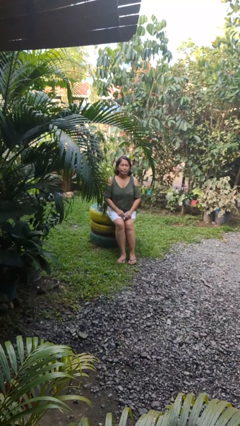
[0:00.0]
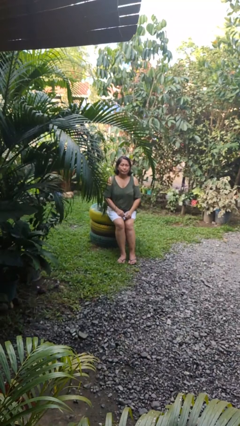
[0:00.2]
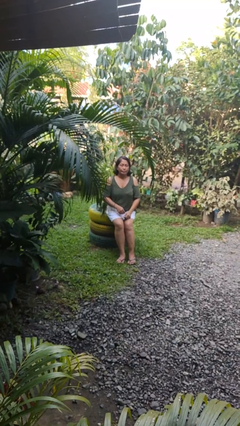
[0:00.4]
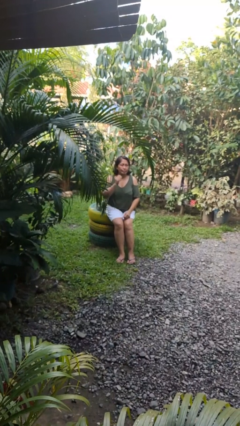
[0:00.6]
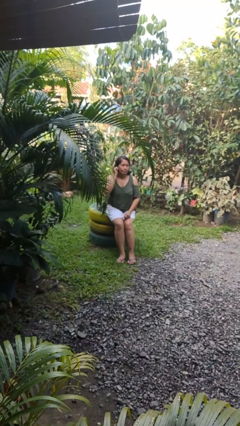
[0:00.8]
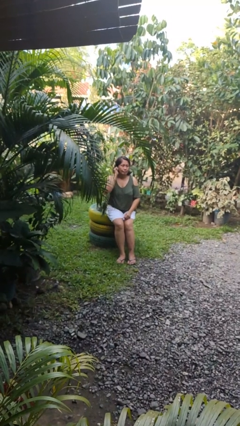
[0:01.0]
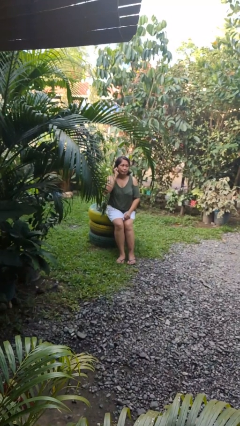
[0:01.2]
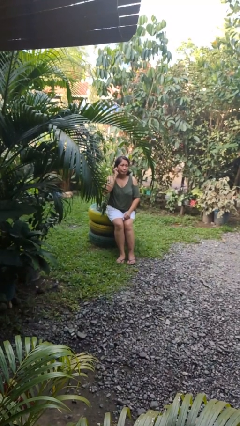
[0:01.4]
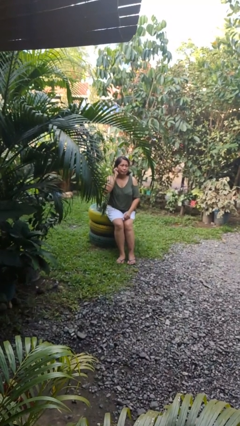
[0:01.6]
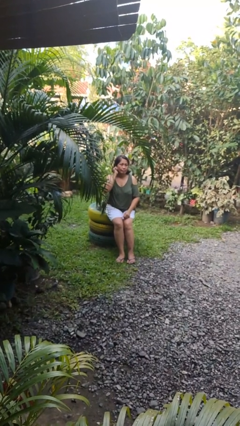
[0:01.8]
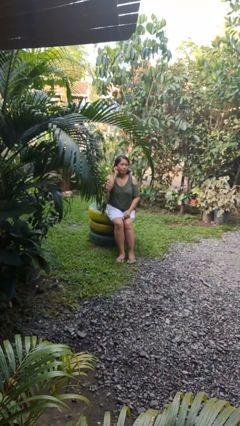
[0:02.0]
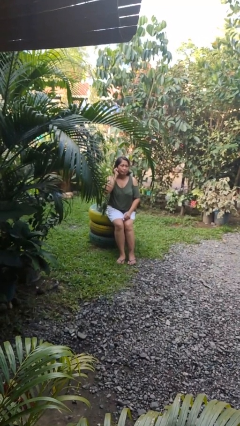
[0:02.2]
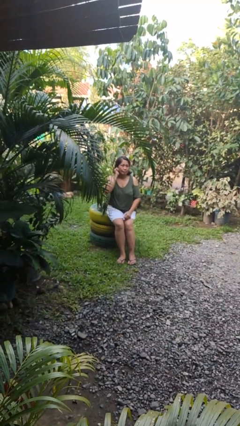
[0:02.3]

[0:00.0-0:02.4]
person touches earlobe

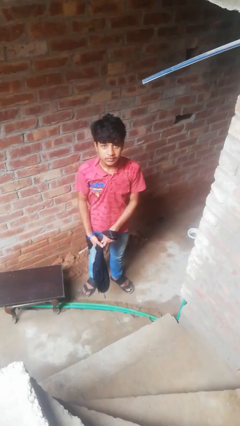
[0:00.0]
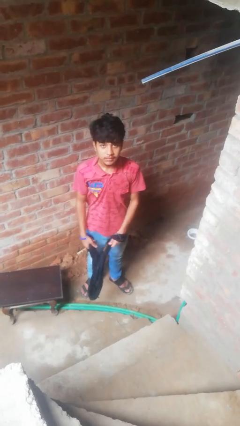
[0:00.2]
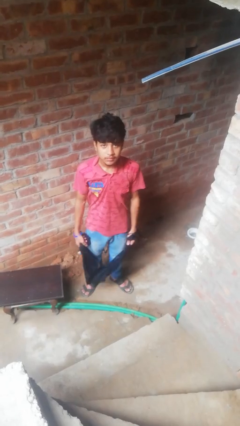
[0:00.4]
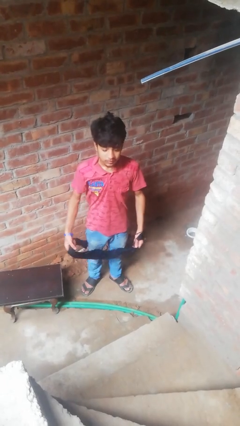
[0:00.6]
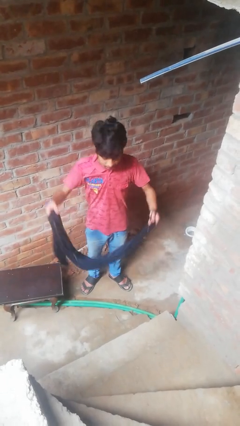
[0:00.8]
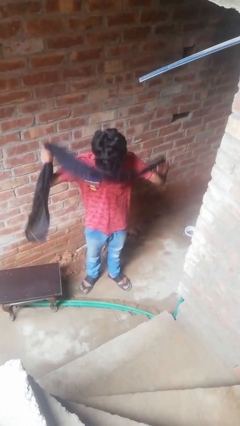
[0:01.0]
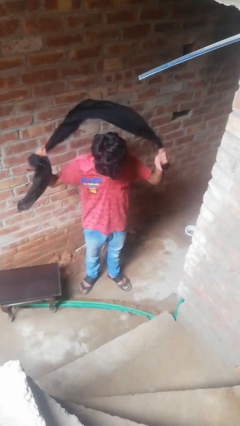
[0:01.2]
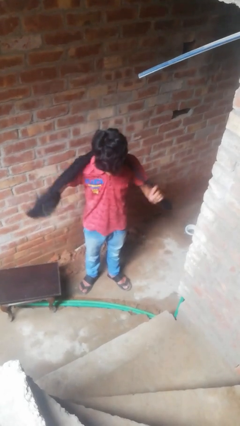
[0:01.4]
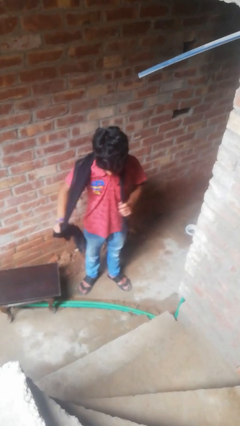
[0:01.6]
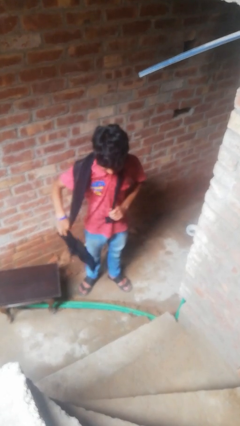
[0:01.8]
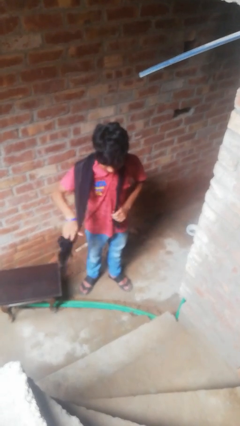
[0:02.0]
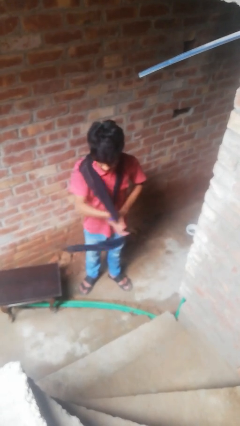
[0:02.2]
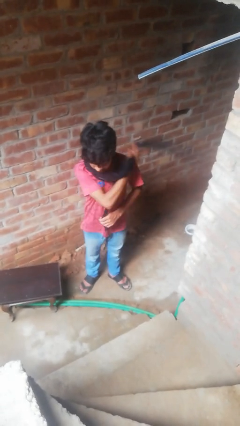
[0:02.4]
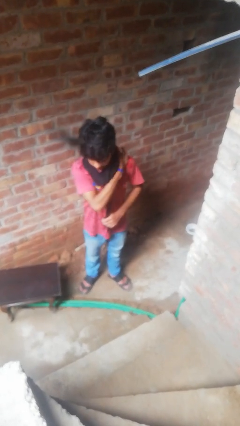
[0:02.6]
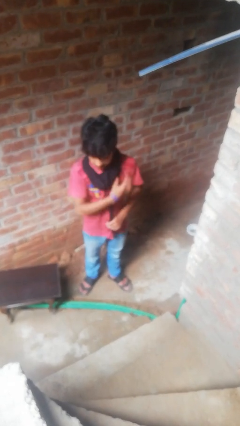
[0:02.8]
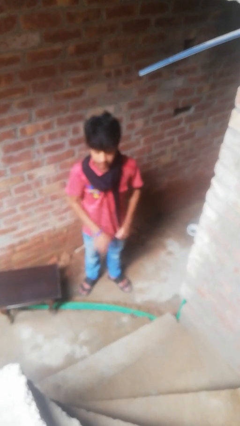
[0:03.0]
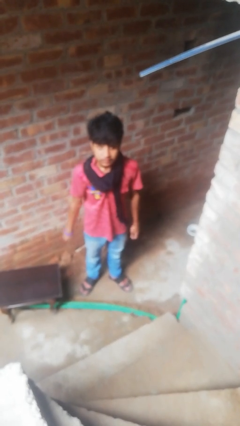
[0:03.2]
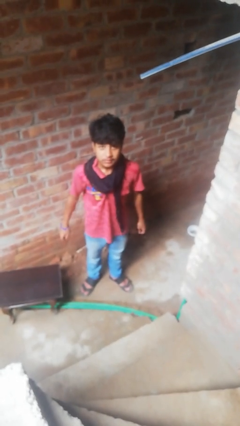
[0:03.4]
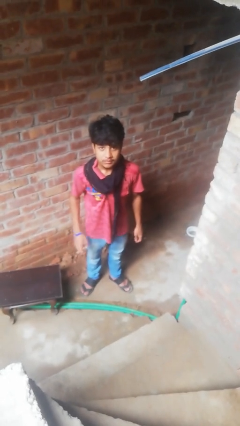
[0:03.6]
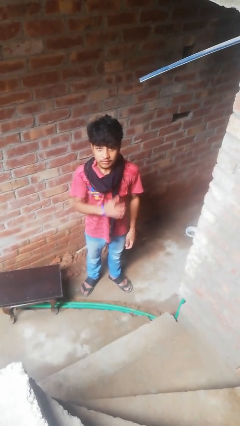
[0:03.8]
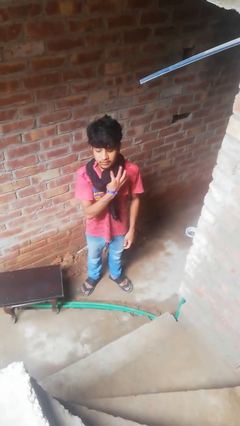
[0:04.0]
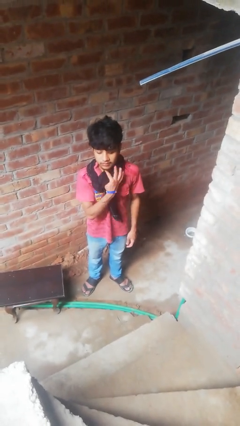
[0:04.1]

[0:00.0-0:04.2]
person puts on scarf

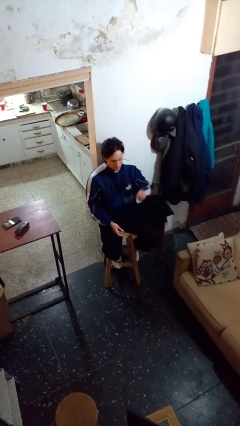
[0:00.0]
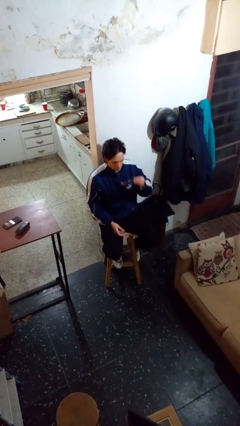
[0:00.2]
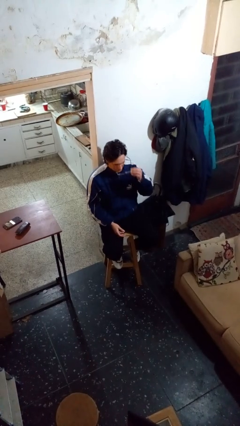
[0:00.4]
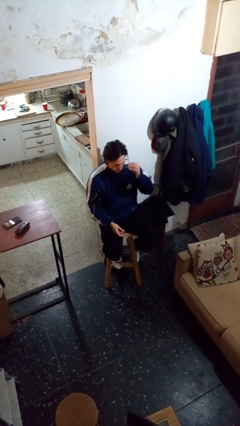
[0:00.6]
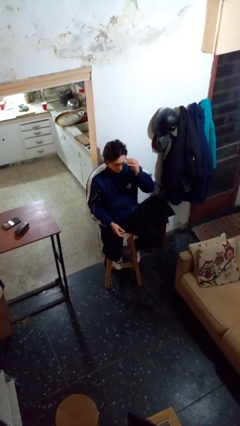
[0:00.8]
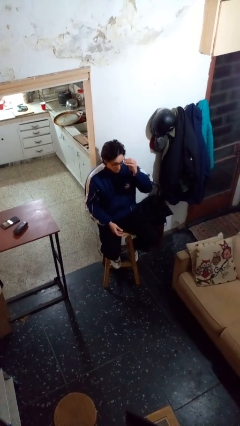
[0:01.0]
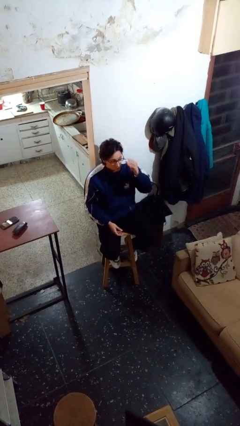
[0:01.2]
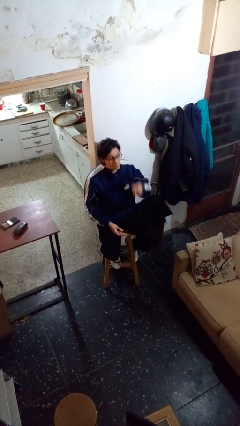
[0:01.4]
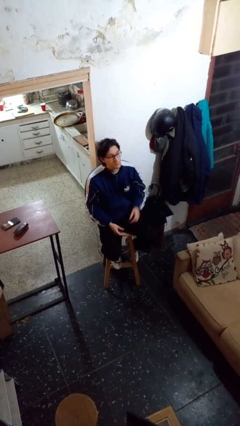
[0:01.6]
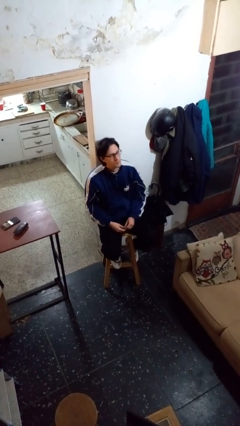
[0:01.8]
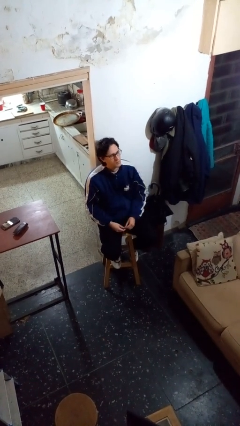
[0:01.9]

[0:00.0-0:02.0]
person puts on glasses

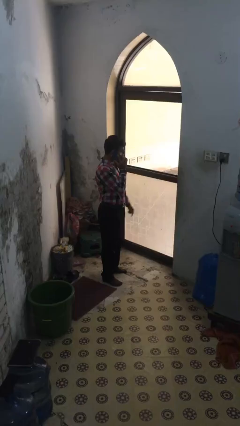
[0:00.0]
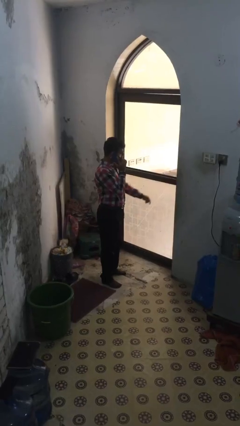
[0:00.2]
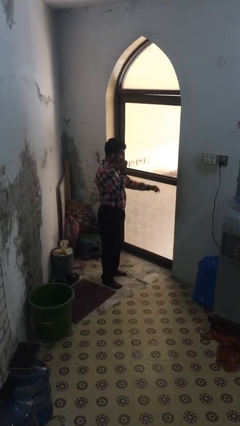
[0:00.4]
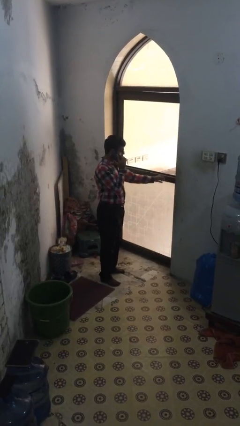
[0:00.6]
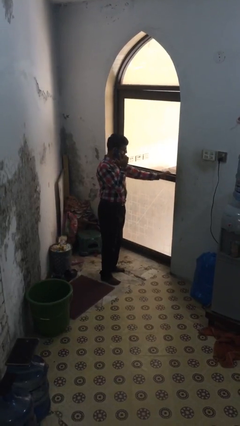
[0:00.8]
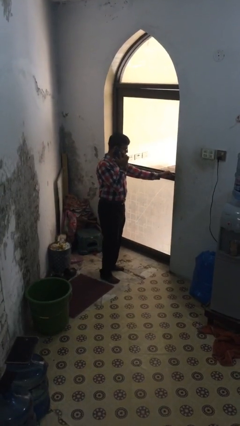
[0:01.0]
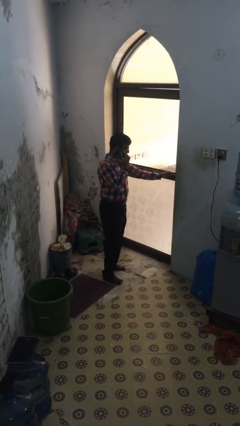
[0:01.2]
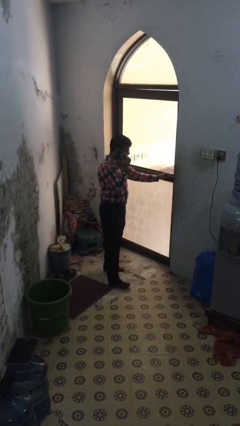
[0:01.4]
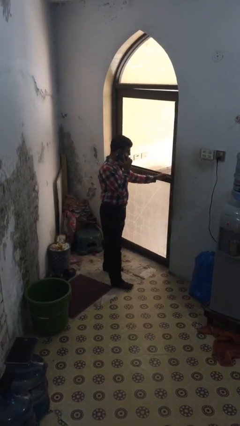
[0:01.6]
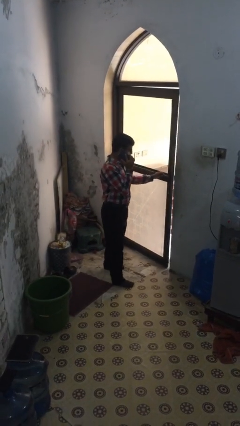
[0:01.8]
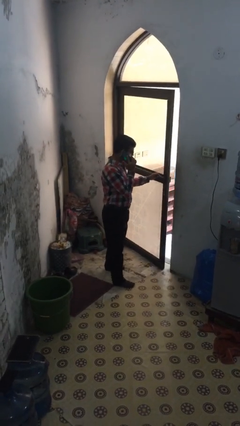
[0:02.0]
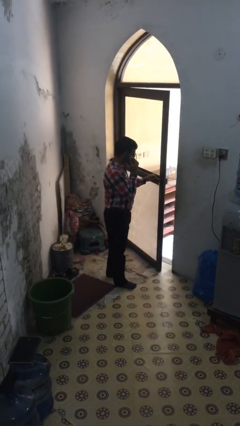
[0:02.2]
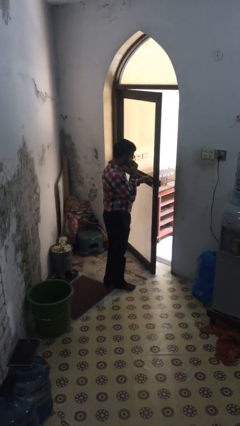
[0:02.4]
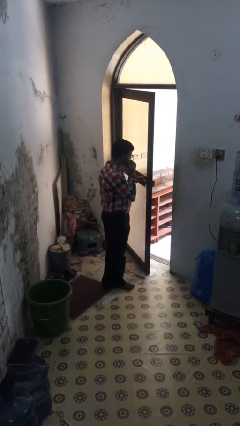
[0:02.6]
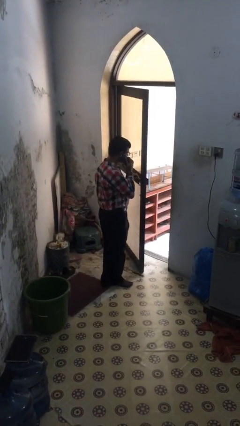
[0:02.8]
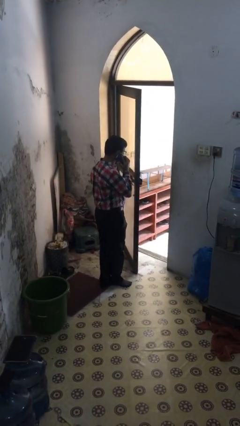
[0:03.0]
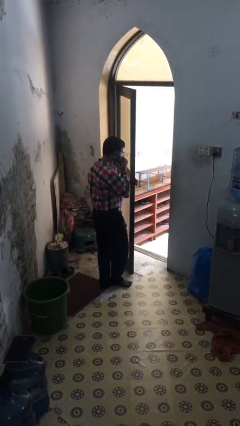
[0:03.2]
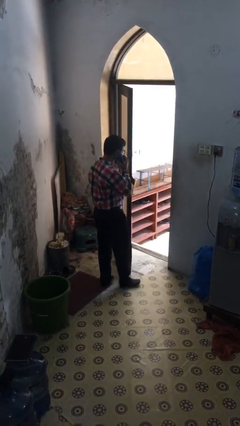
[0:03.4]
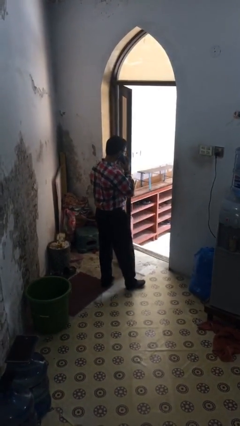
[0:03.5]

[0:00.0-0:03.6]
person opens facility door

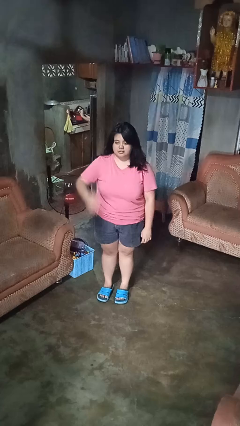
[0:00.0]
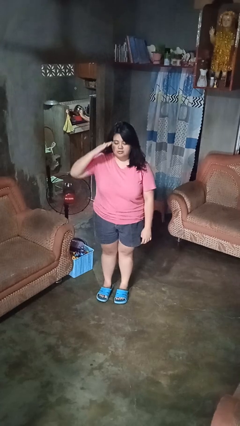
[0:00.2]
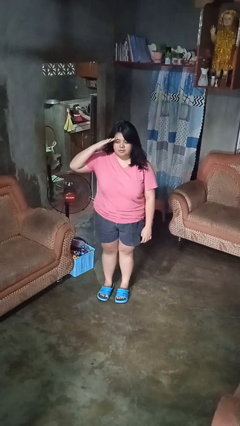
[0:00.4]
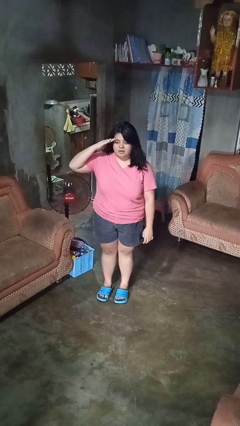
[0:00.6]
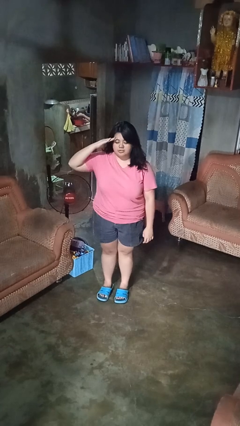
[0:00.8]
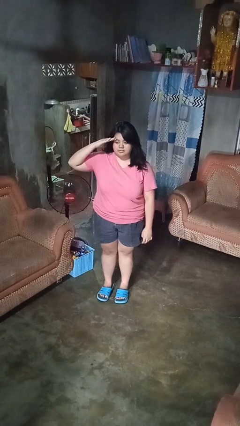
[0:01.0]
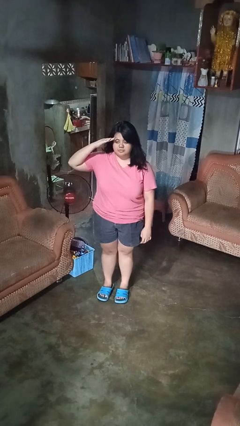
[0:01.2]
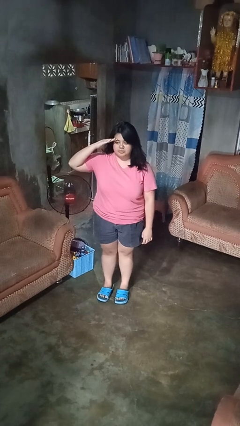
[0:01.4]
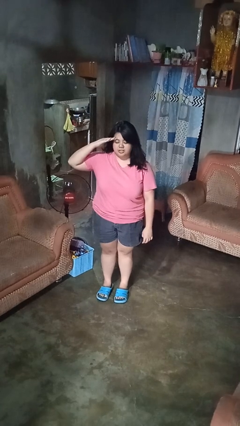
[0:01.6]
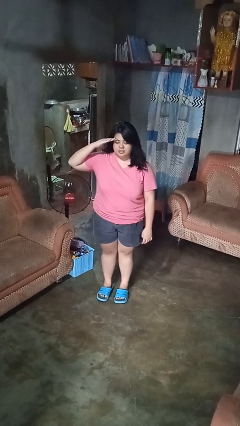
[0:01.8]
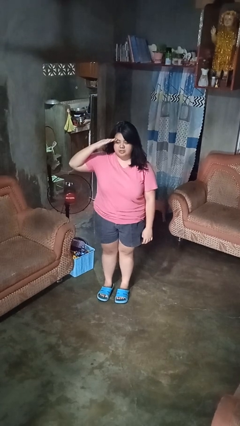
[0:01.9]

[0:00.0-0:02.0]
person salutes

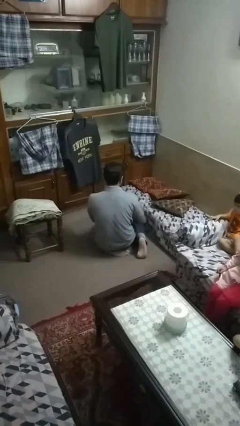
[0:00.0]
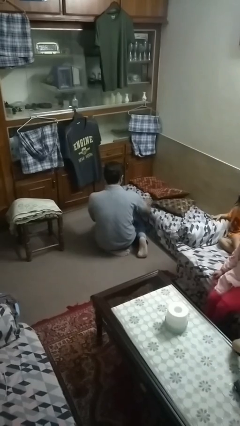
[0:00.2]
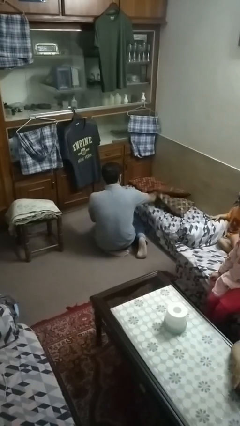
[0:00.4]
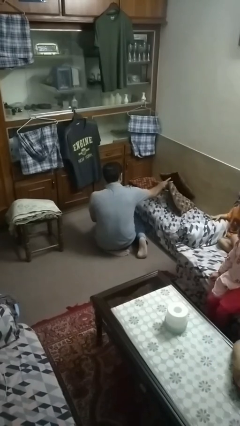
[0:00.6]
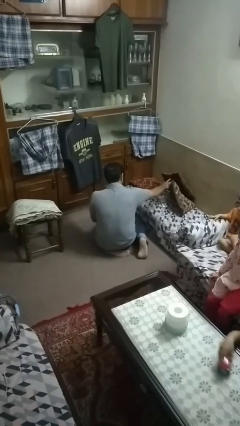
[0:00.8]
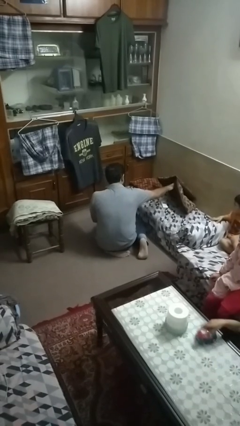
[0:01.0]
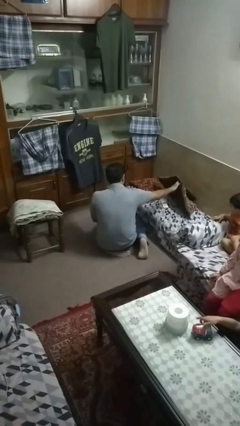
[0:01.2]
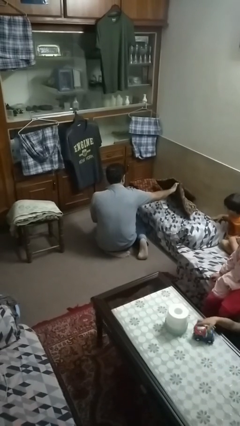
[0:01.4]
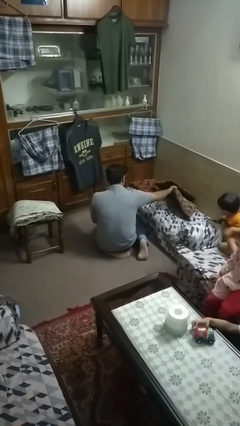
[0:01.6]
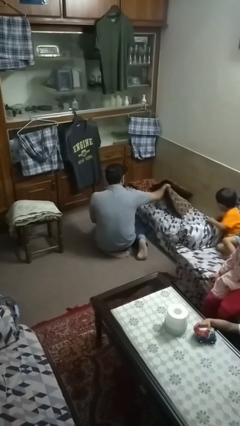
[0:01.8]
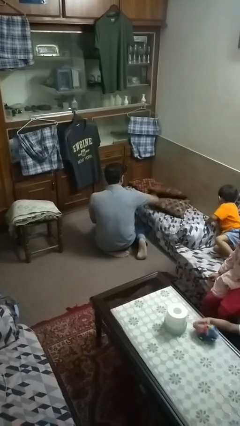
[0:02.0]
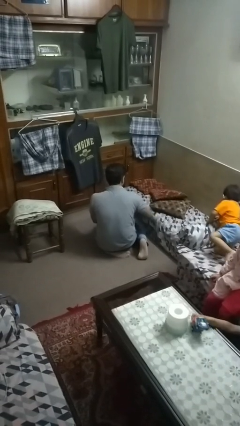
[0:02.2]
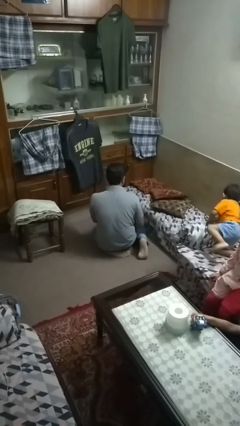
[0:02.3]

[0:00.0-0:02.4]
person searches in couch

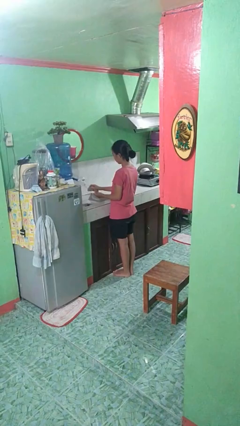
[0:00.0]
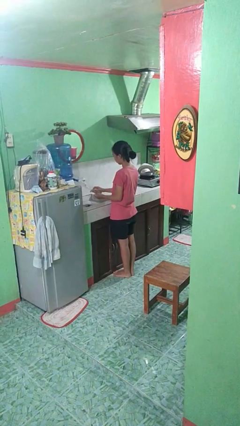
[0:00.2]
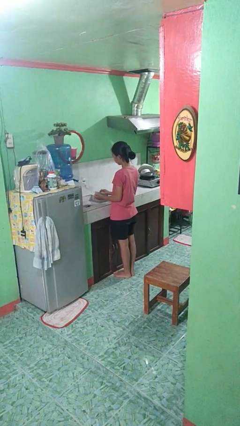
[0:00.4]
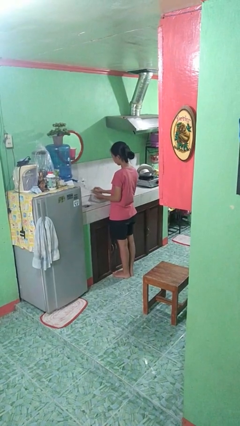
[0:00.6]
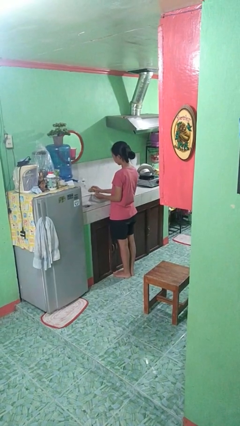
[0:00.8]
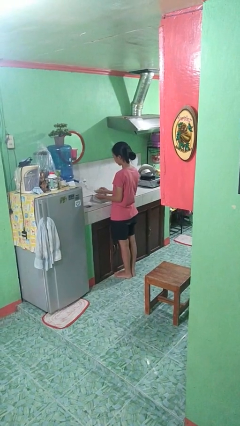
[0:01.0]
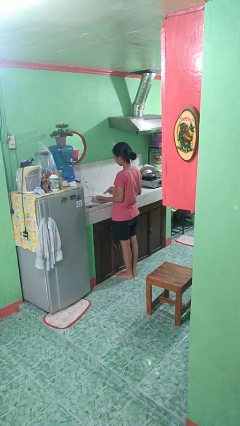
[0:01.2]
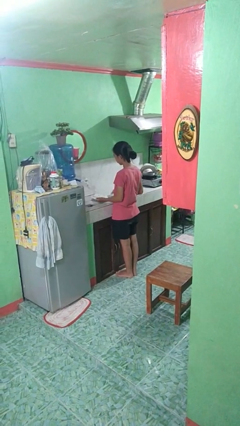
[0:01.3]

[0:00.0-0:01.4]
person dries dish
